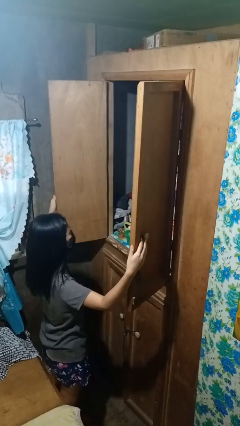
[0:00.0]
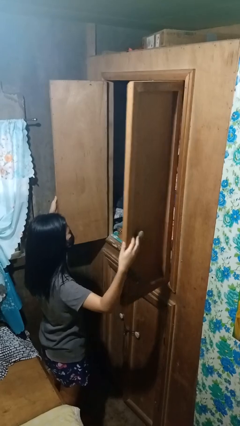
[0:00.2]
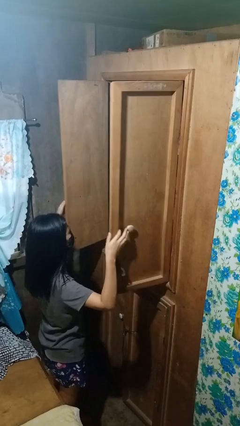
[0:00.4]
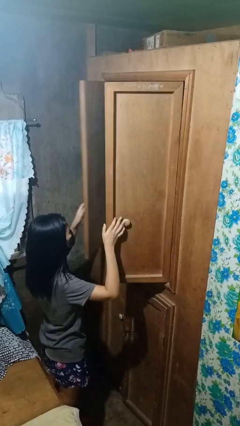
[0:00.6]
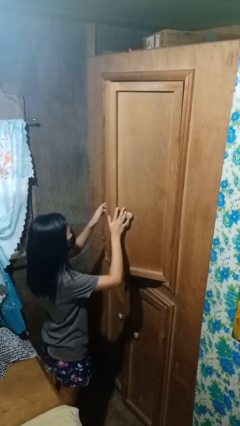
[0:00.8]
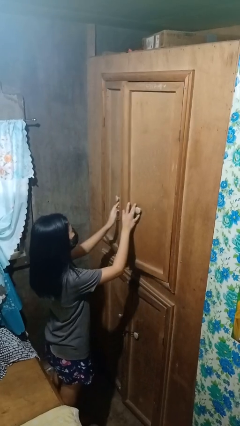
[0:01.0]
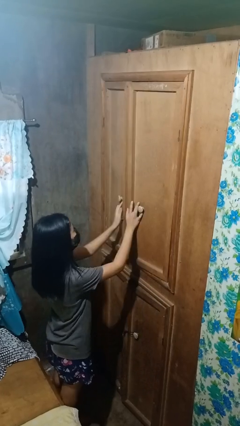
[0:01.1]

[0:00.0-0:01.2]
person closes closet door

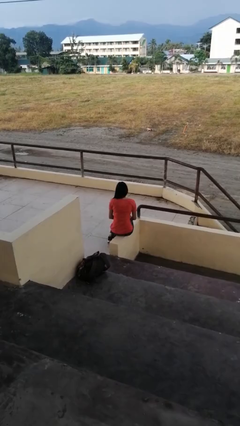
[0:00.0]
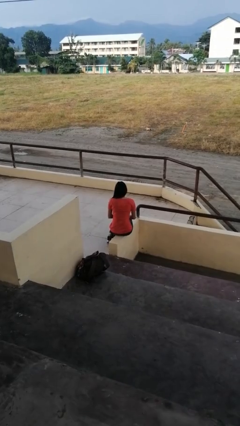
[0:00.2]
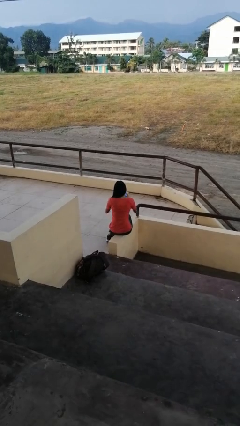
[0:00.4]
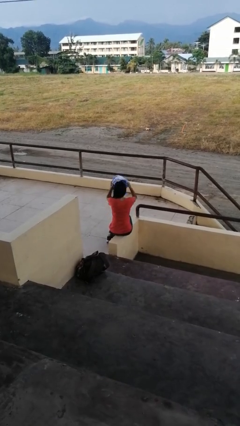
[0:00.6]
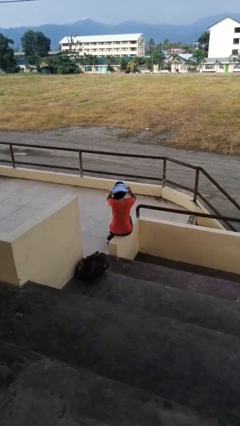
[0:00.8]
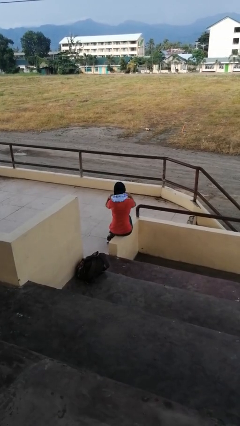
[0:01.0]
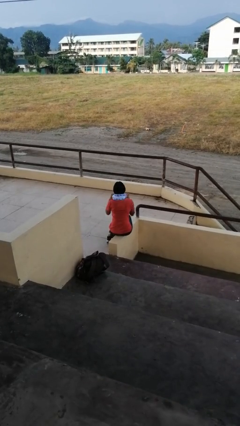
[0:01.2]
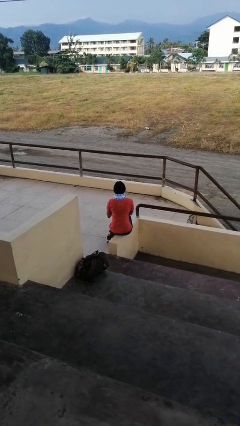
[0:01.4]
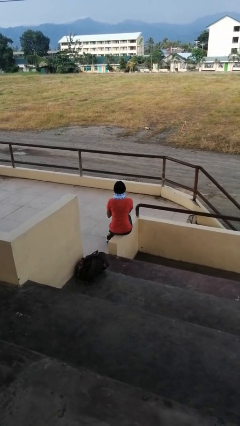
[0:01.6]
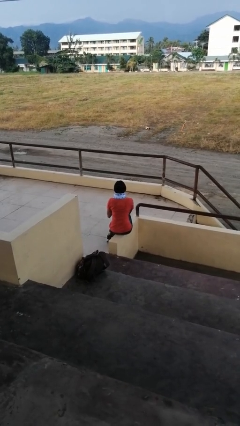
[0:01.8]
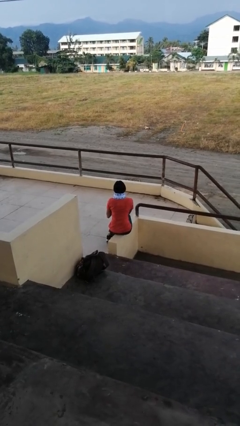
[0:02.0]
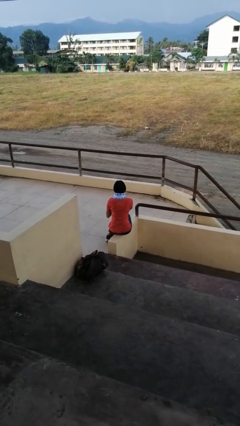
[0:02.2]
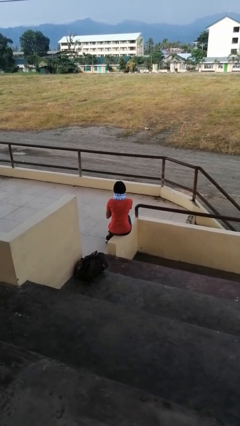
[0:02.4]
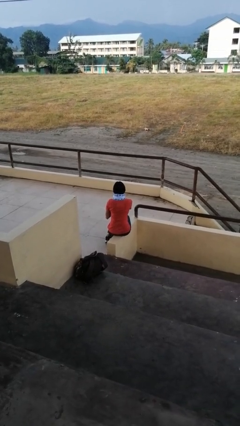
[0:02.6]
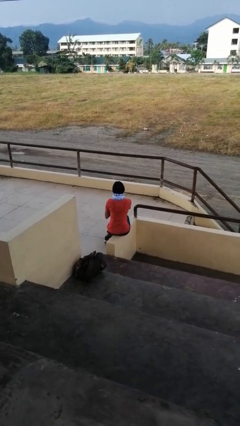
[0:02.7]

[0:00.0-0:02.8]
person puts on scarf

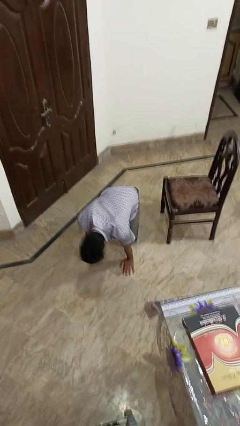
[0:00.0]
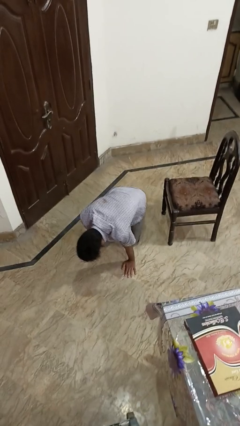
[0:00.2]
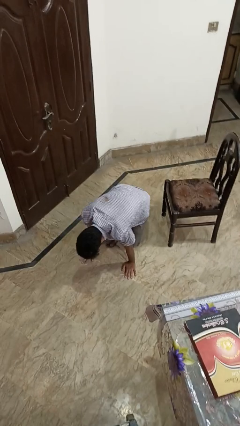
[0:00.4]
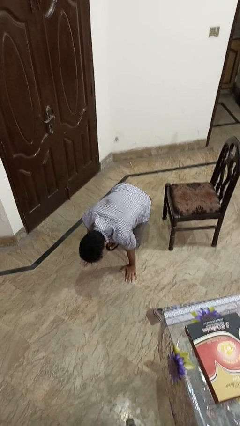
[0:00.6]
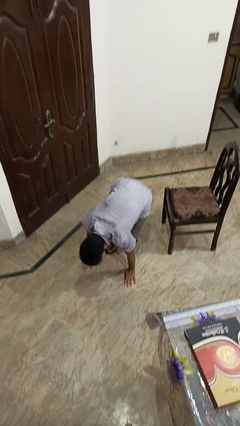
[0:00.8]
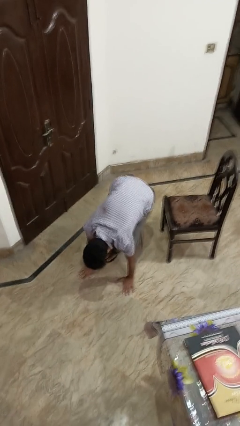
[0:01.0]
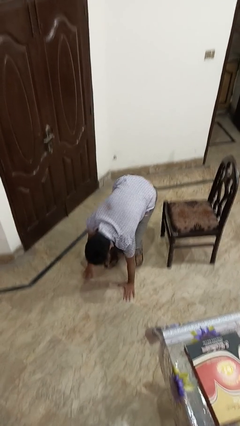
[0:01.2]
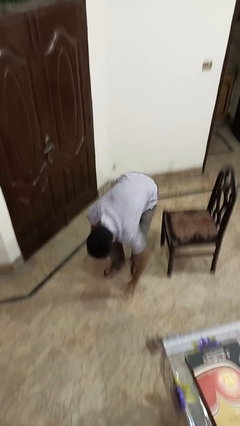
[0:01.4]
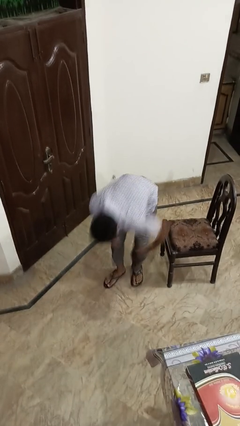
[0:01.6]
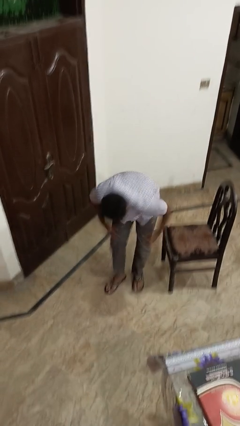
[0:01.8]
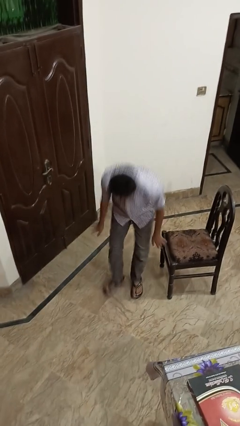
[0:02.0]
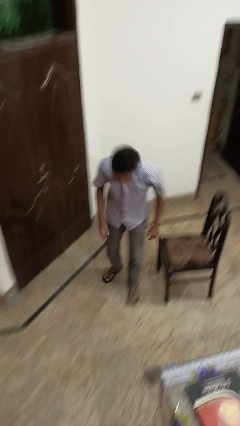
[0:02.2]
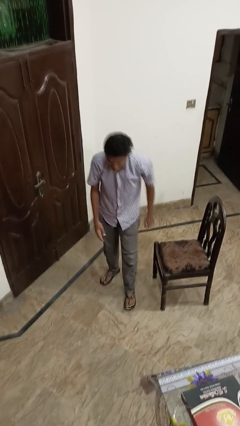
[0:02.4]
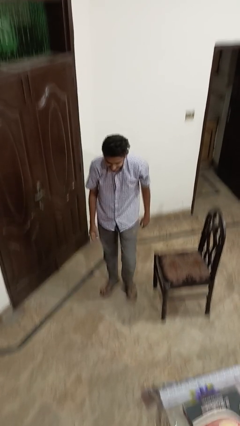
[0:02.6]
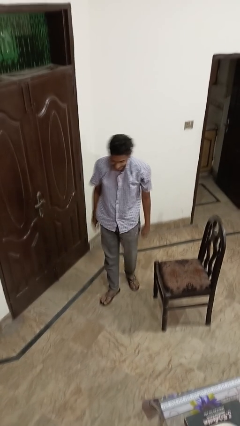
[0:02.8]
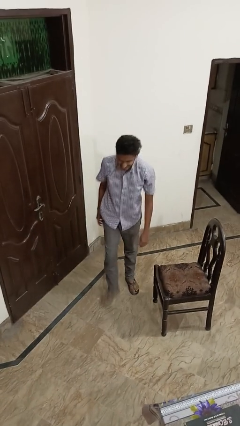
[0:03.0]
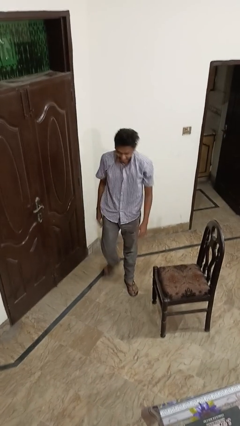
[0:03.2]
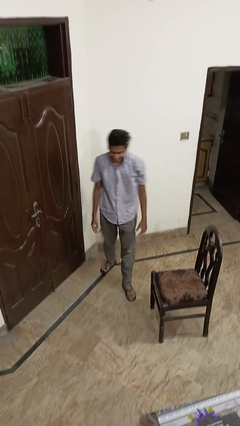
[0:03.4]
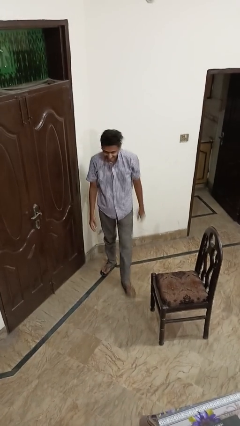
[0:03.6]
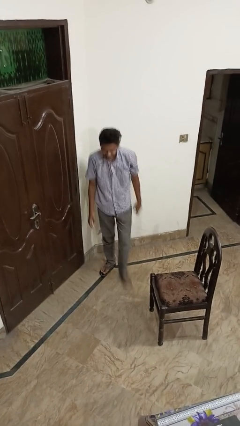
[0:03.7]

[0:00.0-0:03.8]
person stands up from floor

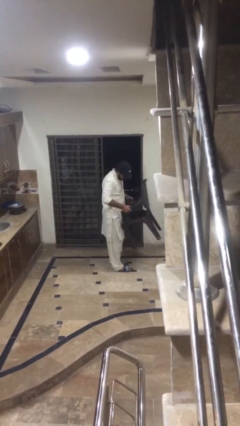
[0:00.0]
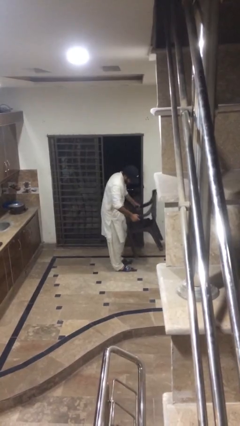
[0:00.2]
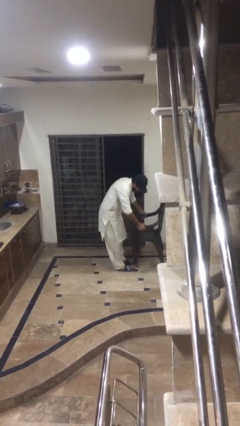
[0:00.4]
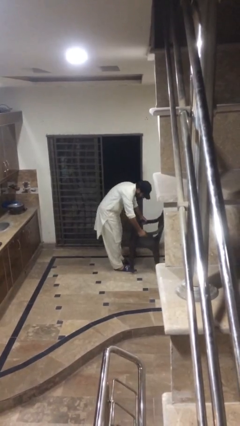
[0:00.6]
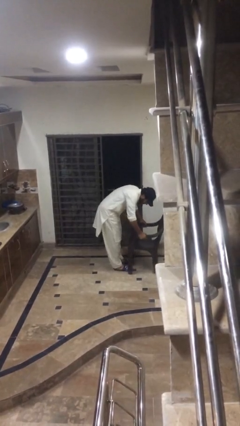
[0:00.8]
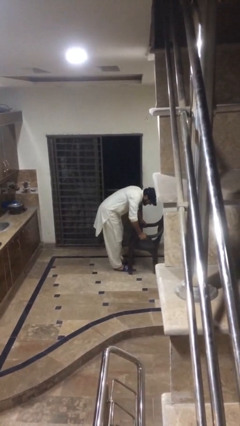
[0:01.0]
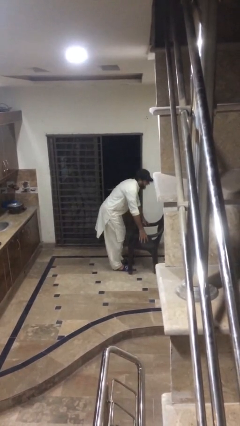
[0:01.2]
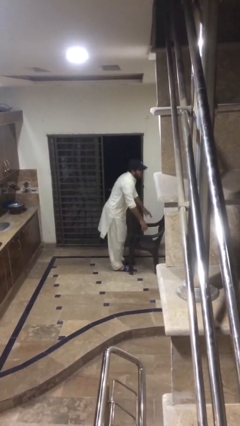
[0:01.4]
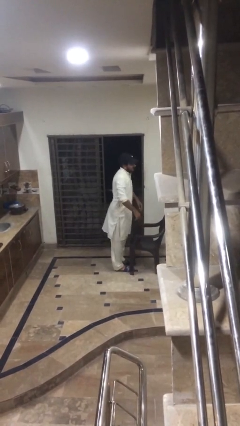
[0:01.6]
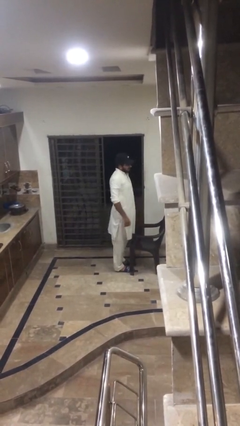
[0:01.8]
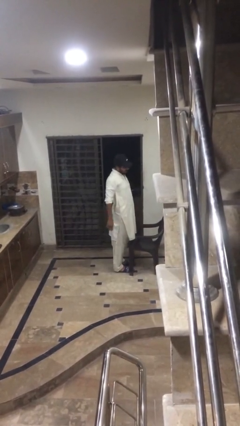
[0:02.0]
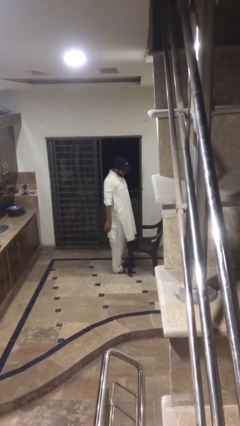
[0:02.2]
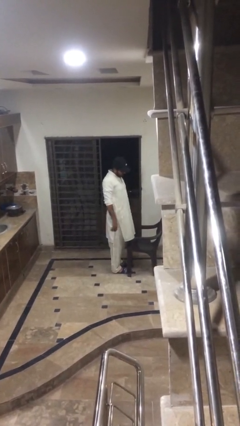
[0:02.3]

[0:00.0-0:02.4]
person puts down object on floor

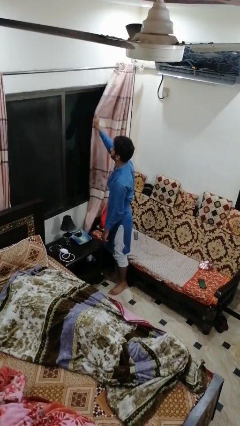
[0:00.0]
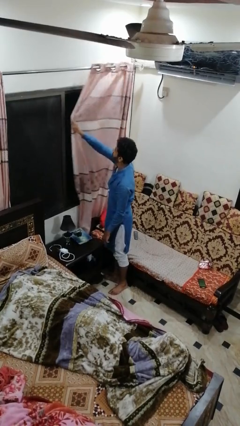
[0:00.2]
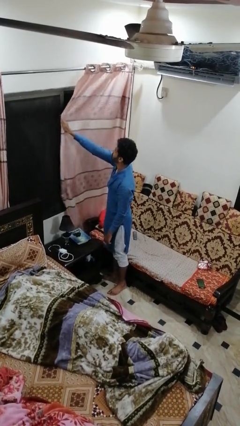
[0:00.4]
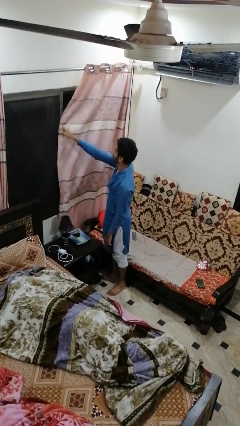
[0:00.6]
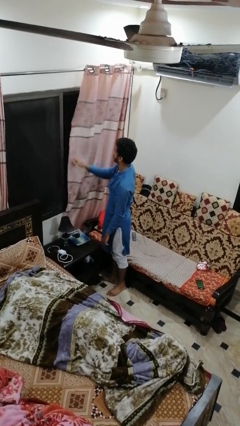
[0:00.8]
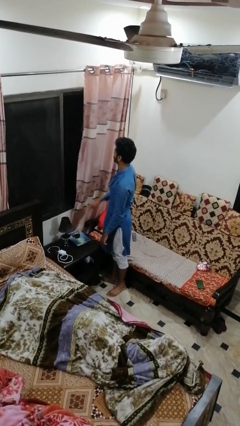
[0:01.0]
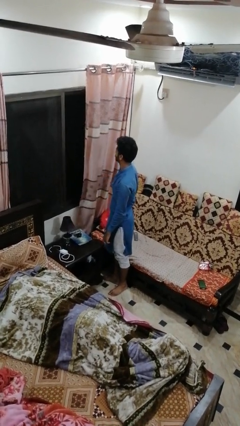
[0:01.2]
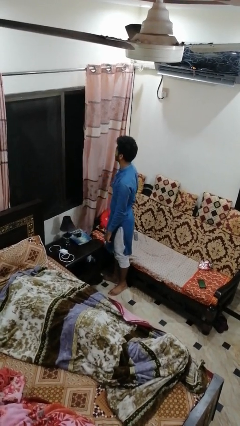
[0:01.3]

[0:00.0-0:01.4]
person closes curtains

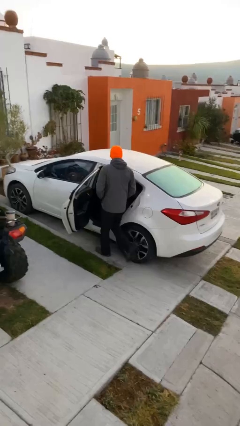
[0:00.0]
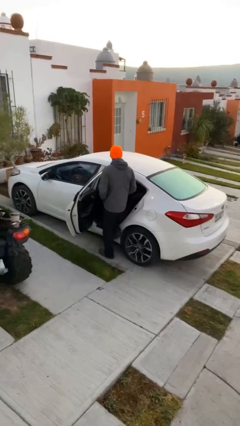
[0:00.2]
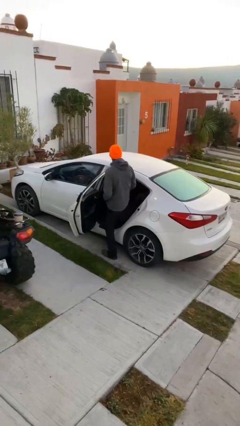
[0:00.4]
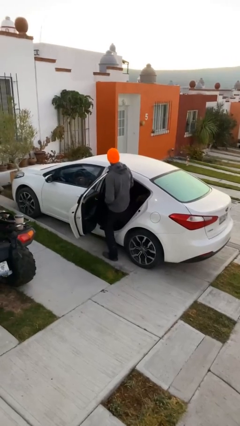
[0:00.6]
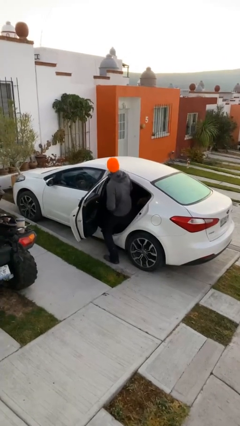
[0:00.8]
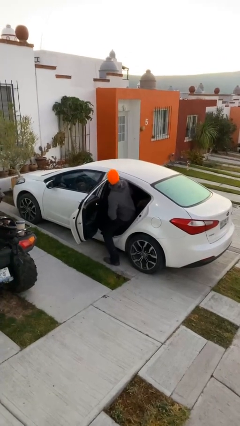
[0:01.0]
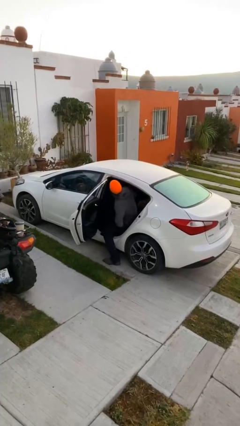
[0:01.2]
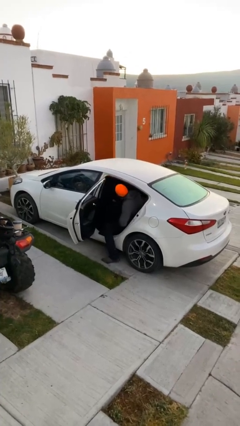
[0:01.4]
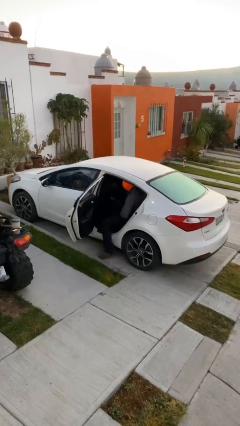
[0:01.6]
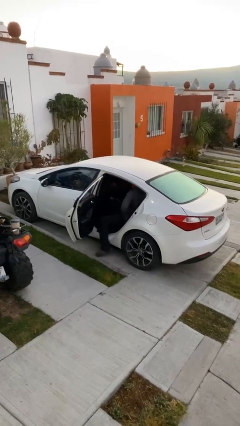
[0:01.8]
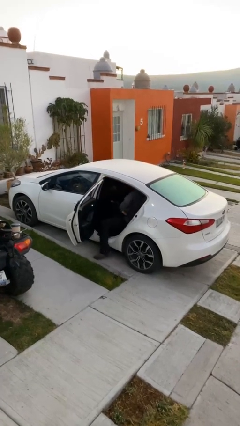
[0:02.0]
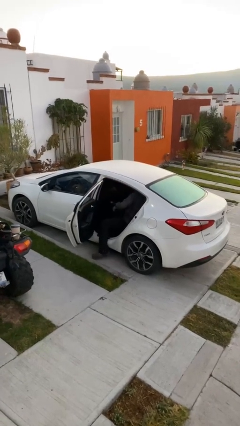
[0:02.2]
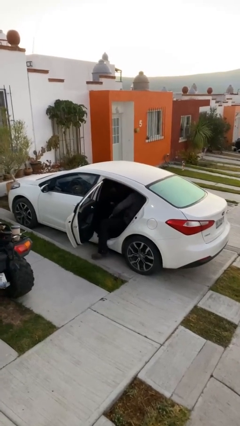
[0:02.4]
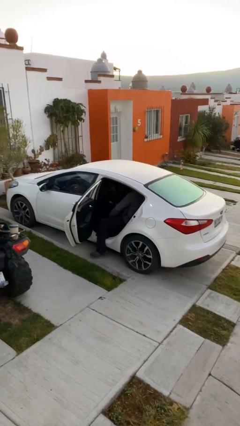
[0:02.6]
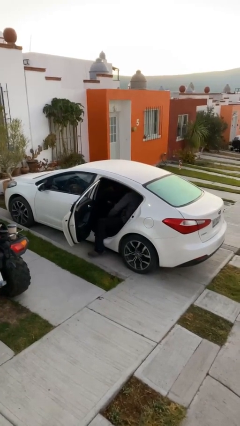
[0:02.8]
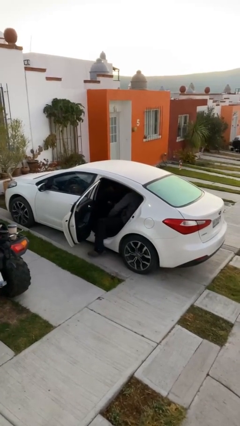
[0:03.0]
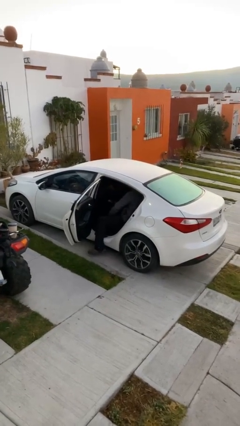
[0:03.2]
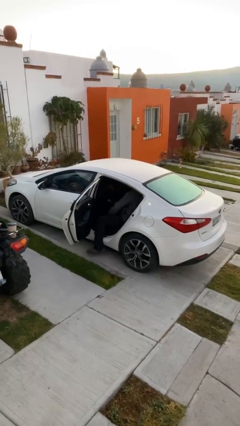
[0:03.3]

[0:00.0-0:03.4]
person enters car

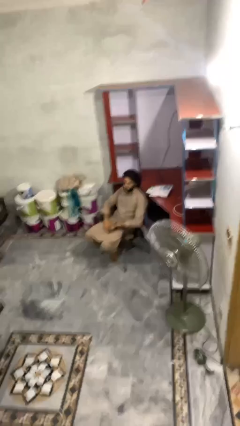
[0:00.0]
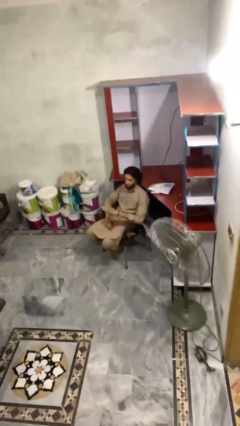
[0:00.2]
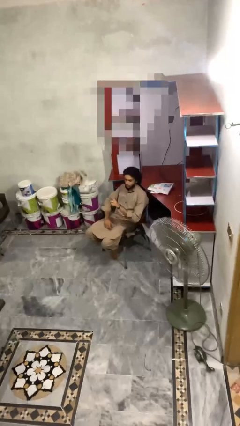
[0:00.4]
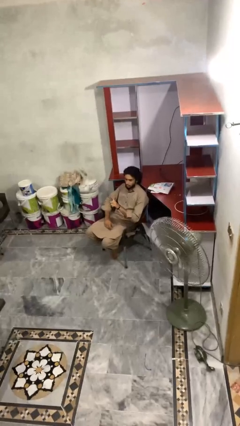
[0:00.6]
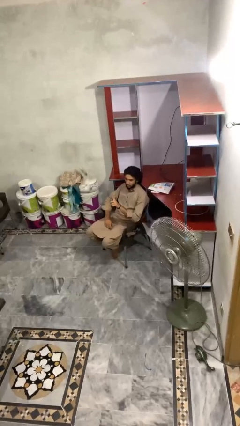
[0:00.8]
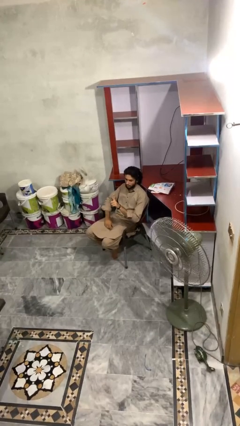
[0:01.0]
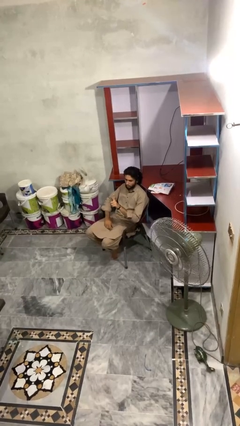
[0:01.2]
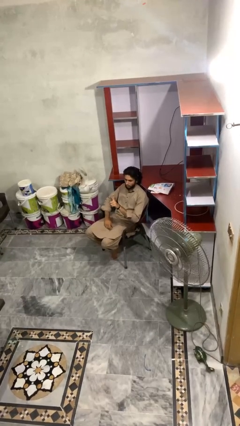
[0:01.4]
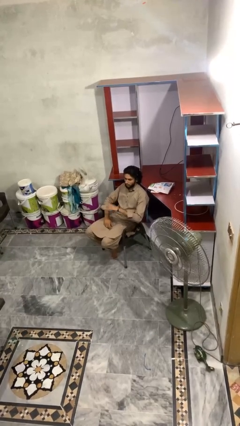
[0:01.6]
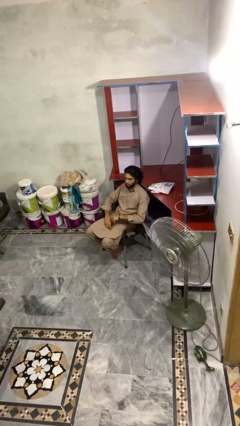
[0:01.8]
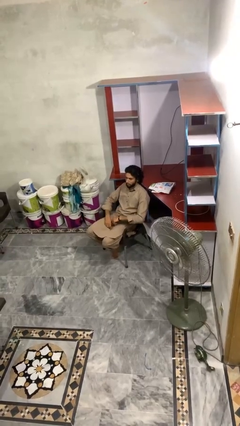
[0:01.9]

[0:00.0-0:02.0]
person gestures number one
